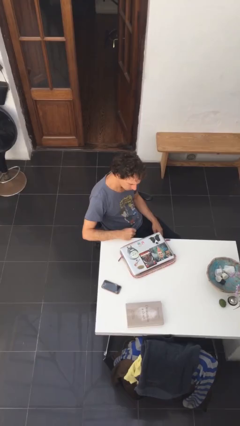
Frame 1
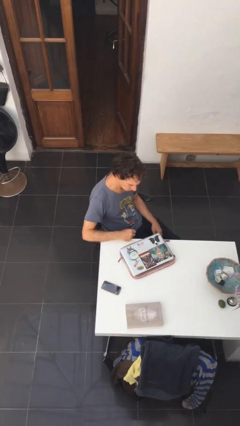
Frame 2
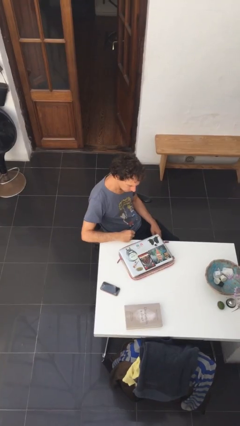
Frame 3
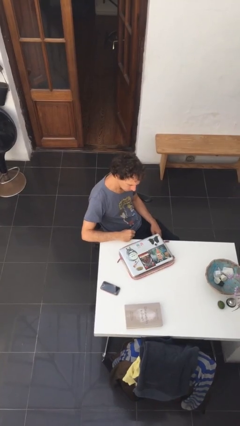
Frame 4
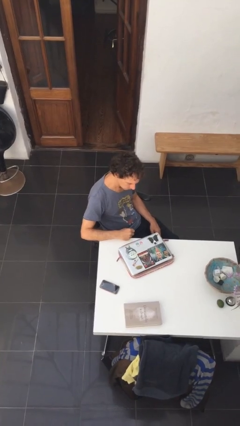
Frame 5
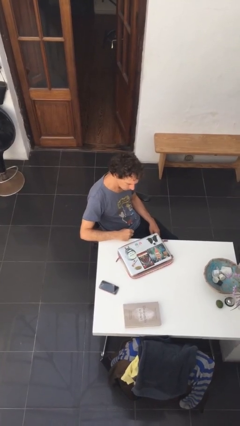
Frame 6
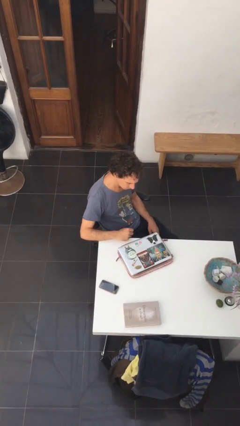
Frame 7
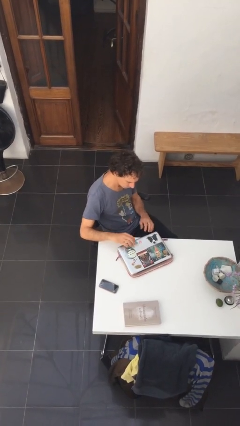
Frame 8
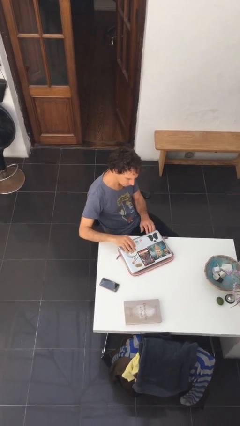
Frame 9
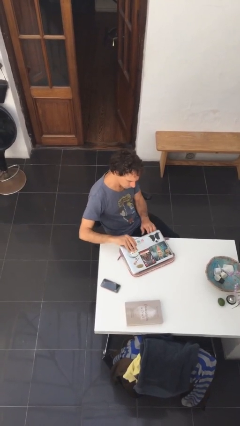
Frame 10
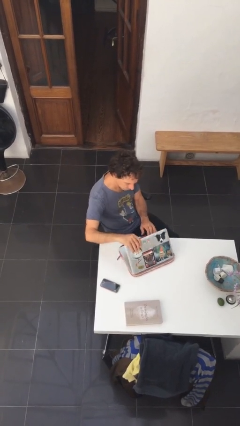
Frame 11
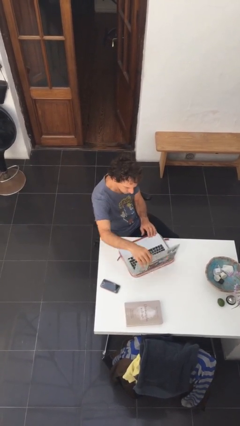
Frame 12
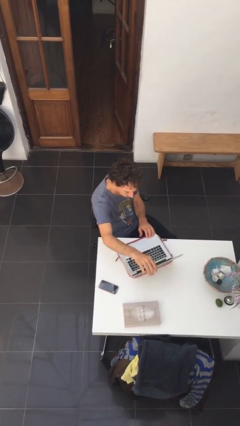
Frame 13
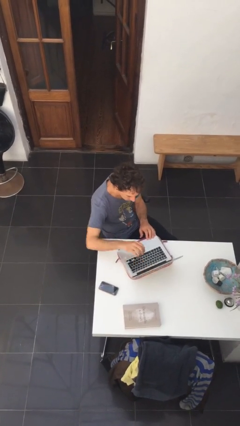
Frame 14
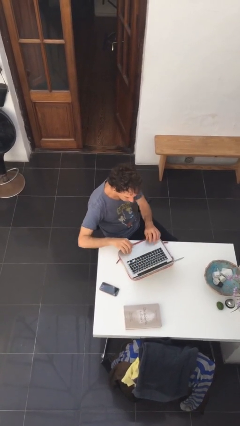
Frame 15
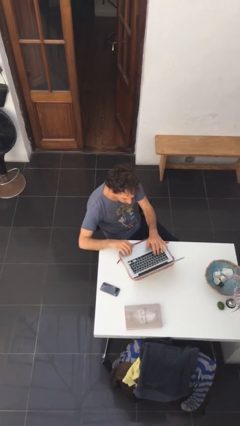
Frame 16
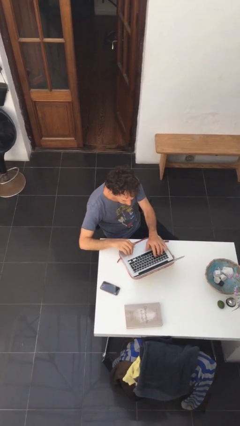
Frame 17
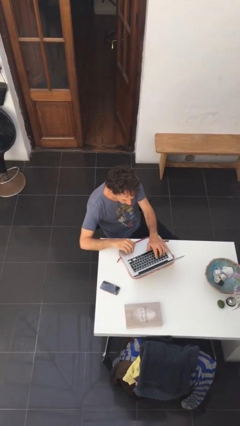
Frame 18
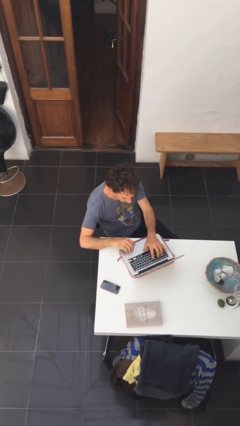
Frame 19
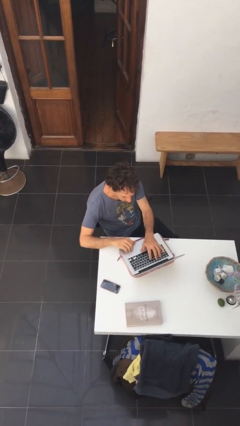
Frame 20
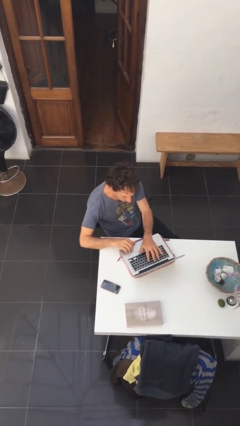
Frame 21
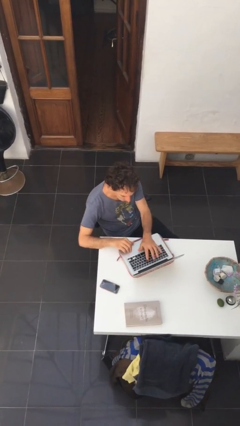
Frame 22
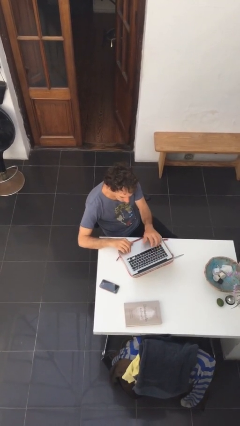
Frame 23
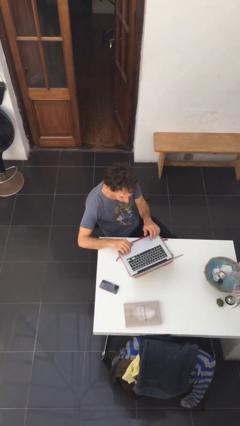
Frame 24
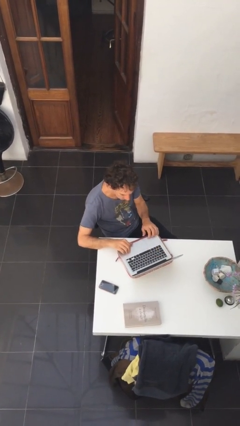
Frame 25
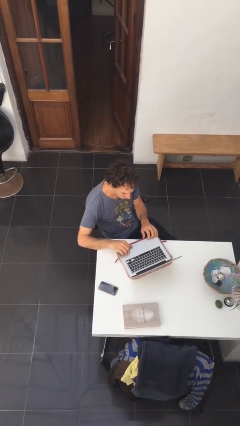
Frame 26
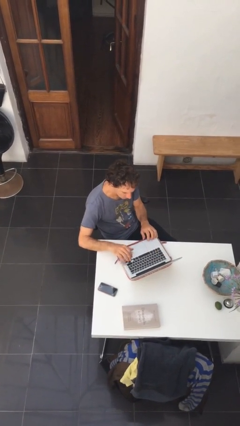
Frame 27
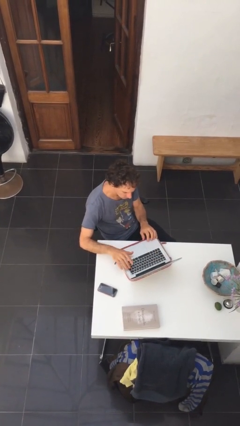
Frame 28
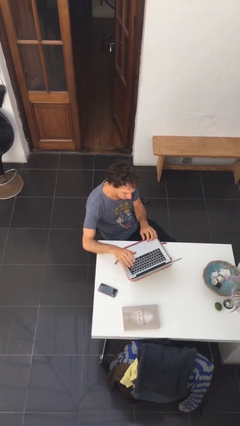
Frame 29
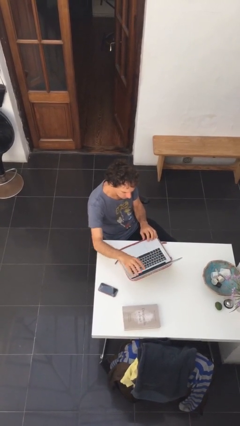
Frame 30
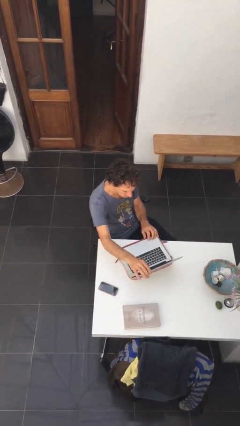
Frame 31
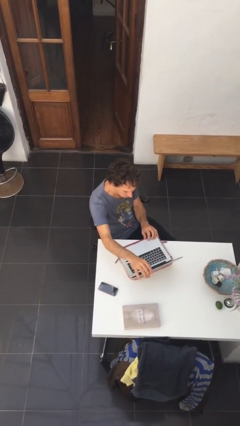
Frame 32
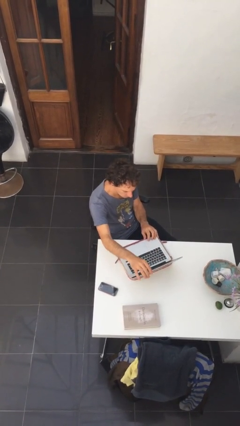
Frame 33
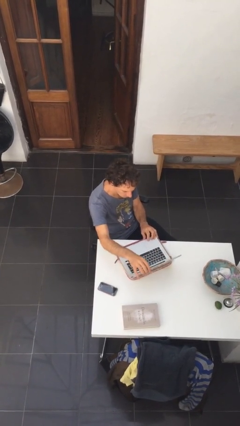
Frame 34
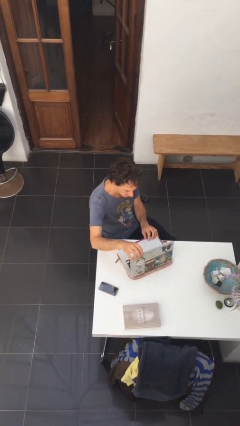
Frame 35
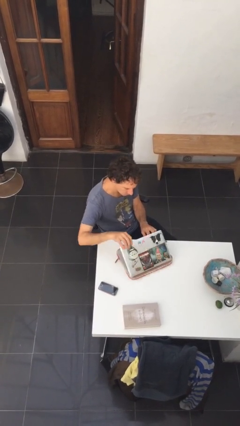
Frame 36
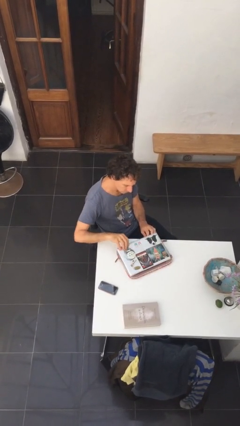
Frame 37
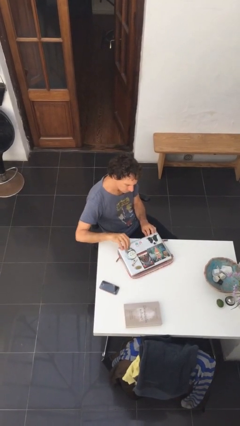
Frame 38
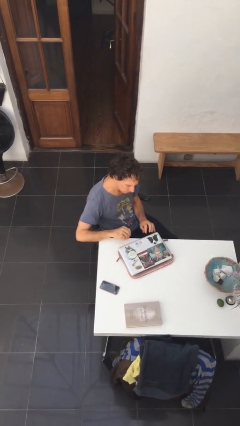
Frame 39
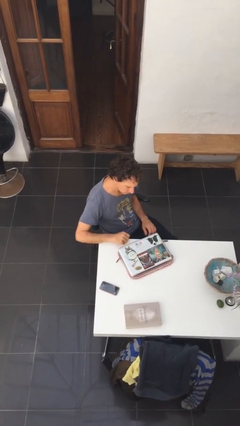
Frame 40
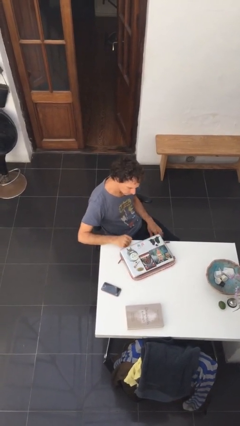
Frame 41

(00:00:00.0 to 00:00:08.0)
person interacts with laptop

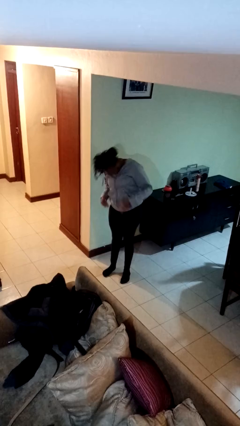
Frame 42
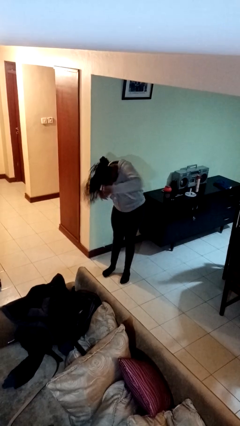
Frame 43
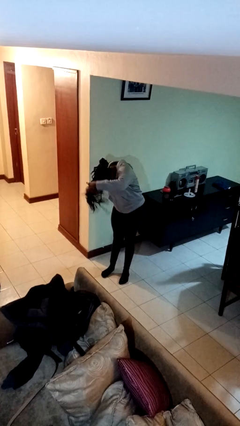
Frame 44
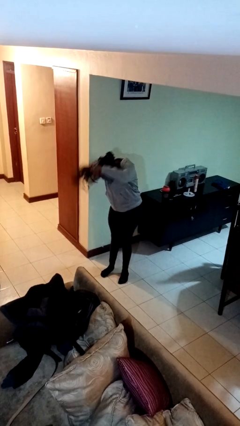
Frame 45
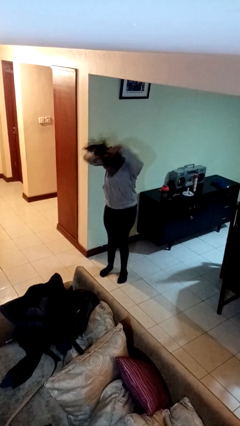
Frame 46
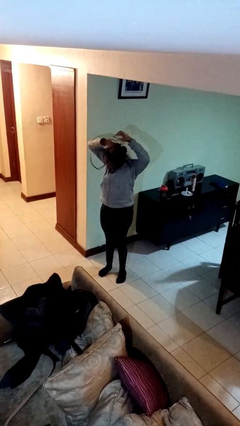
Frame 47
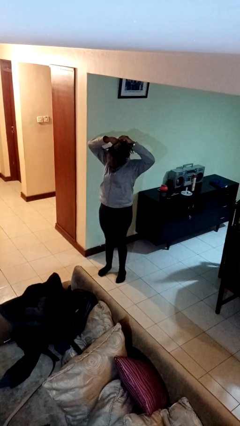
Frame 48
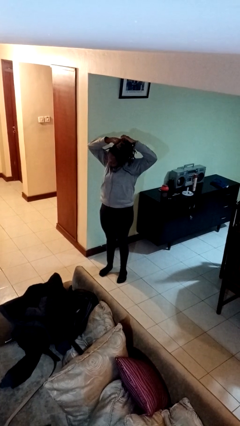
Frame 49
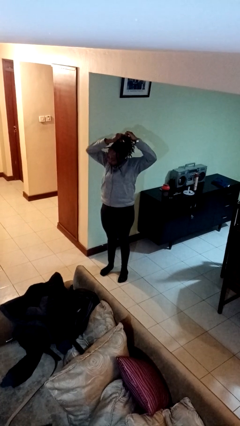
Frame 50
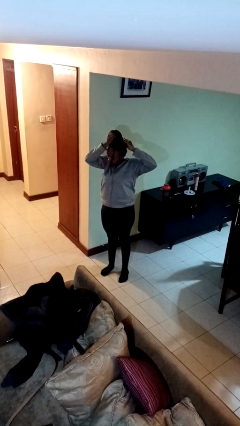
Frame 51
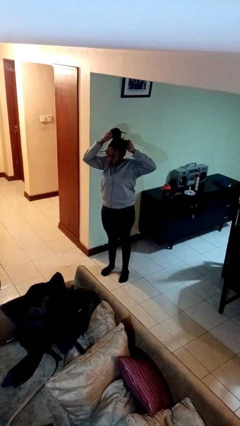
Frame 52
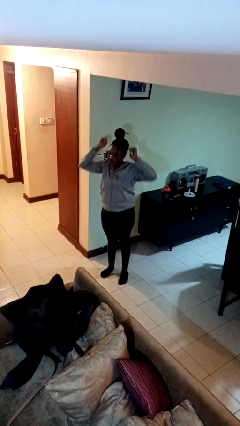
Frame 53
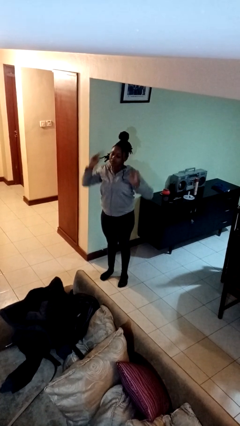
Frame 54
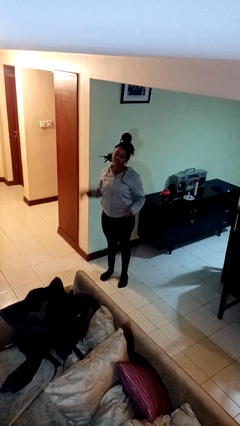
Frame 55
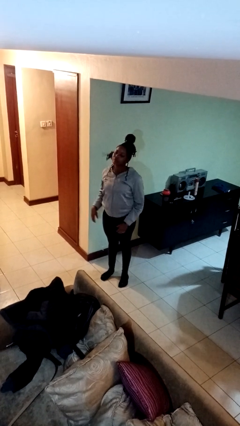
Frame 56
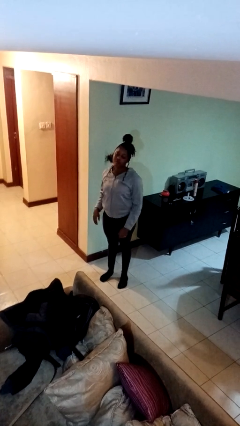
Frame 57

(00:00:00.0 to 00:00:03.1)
person puts hair in ponytail

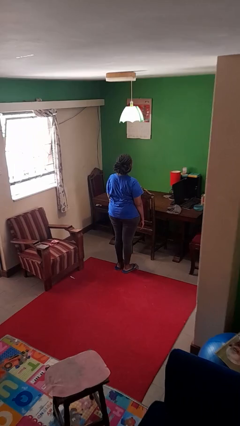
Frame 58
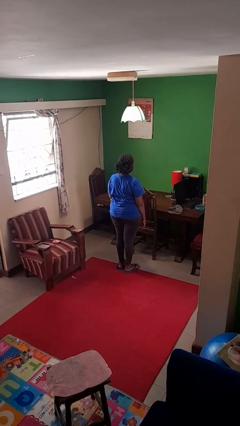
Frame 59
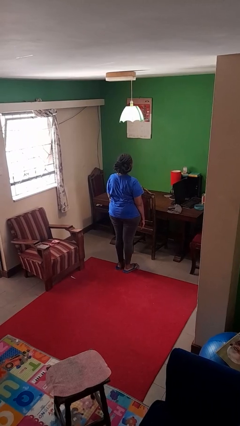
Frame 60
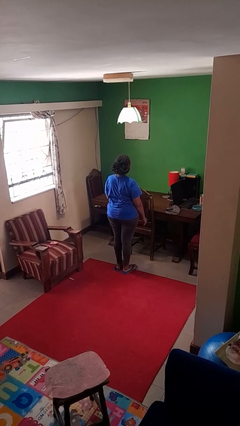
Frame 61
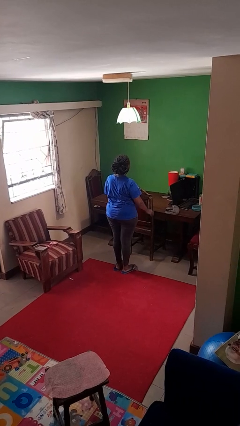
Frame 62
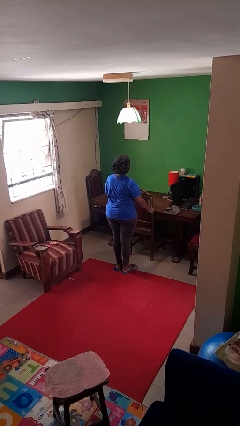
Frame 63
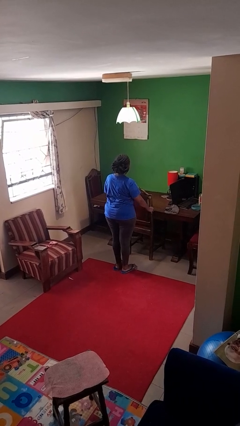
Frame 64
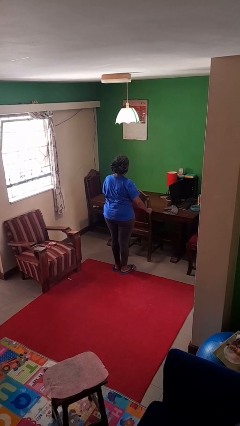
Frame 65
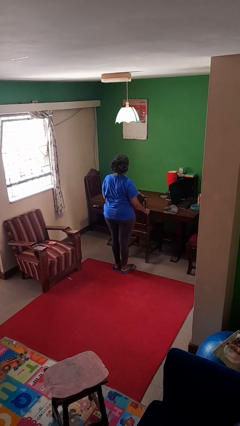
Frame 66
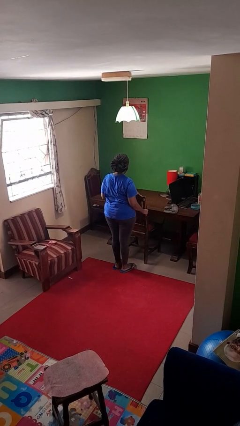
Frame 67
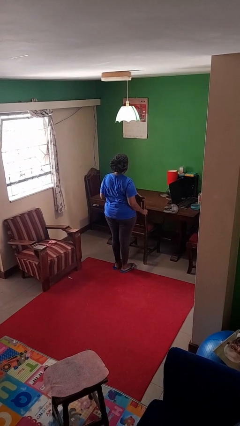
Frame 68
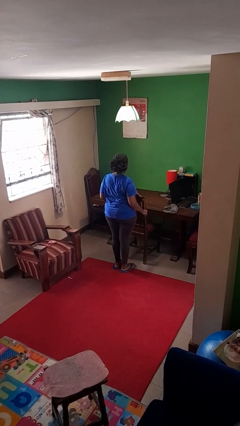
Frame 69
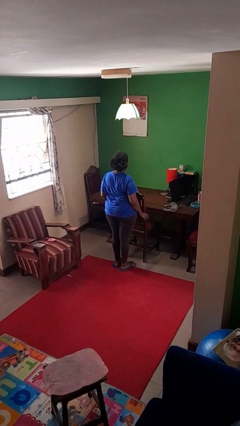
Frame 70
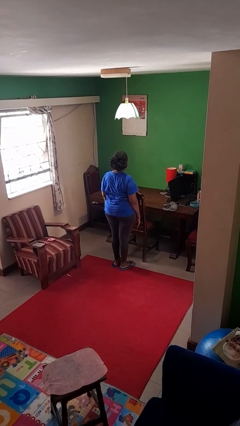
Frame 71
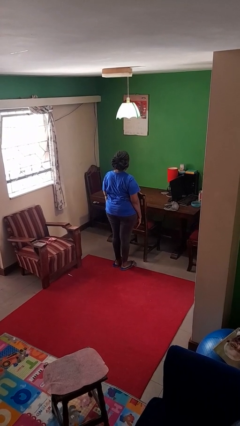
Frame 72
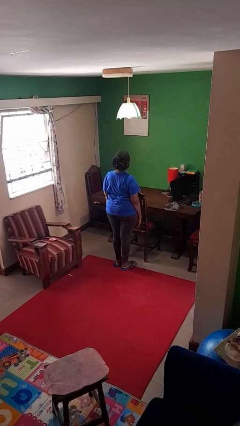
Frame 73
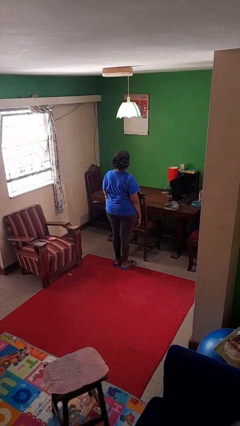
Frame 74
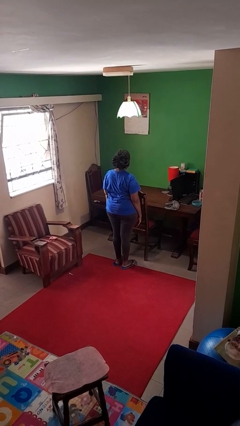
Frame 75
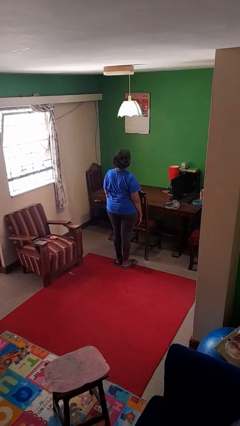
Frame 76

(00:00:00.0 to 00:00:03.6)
person pulls out chair

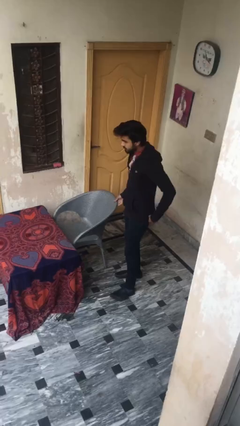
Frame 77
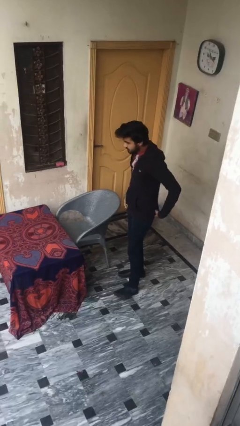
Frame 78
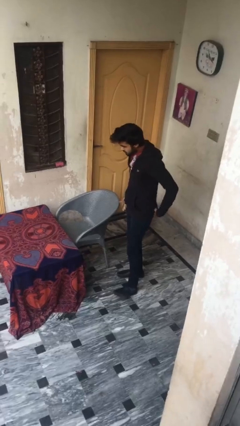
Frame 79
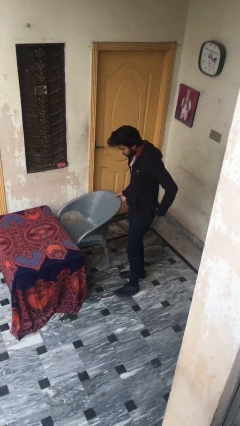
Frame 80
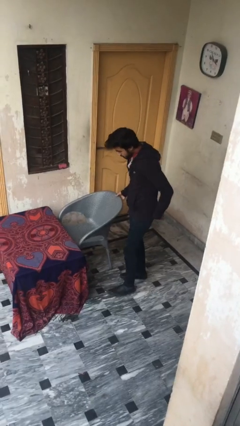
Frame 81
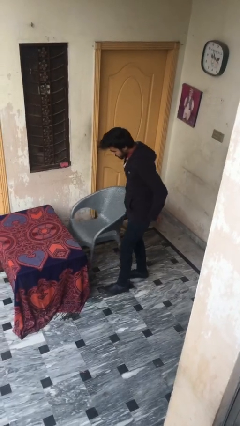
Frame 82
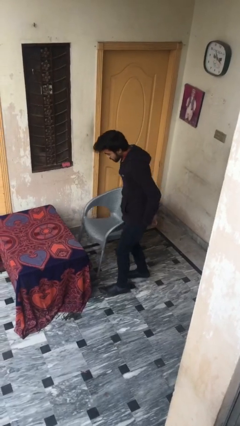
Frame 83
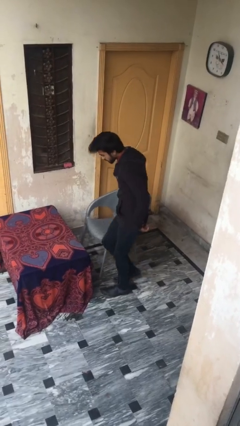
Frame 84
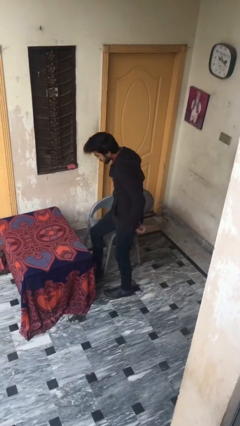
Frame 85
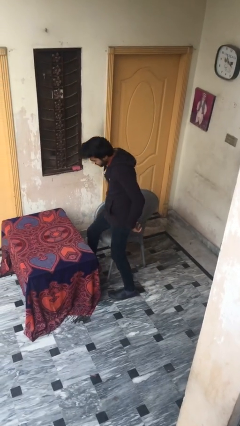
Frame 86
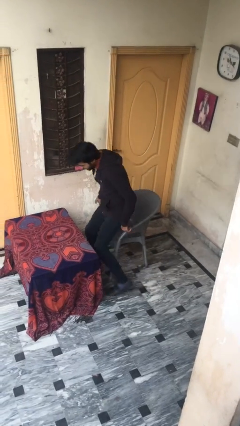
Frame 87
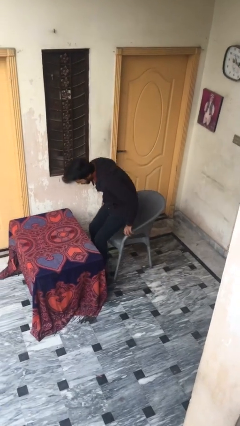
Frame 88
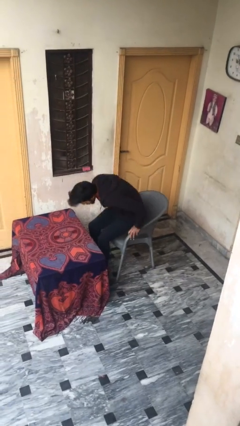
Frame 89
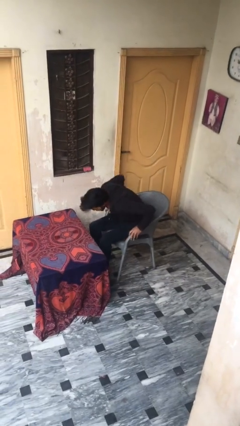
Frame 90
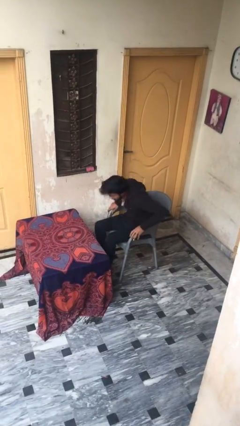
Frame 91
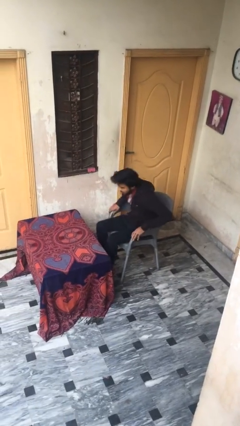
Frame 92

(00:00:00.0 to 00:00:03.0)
person sits down

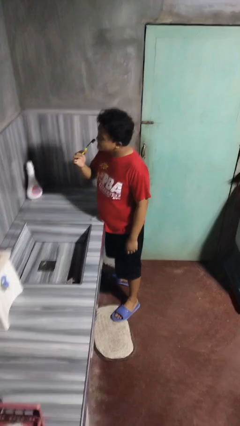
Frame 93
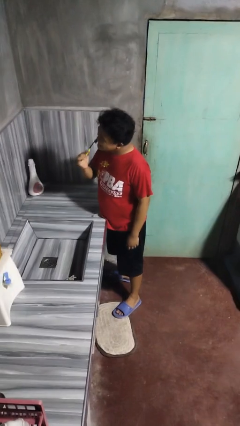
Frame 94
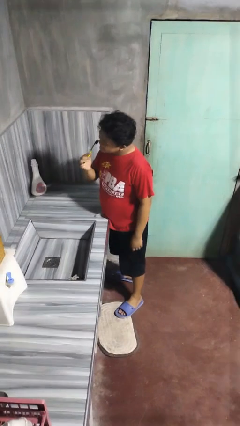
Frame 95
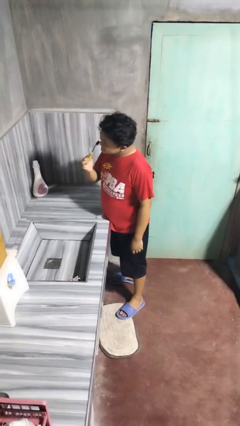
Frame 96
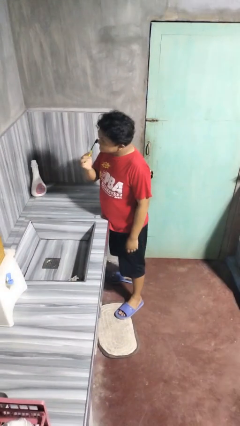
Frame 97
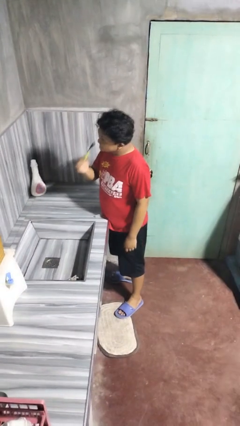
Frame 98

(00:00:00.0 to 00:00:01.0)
person brushes teeth
